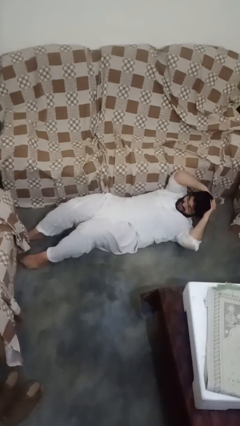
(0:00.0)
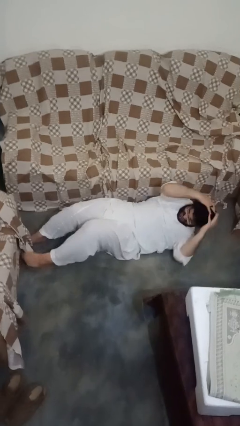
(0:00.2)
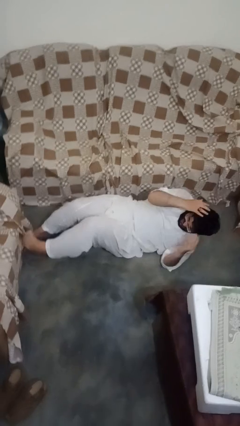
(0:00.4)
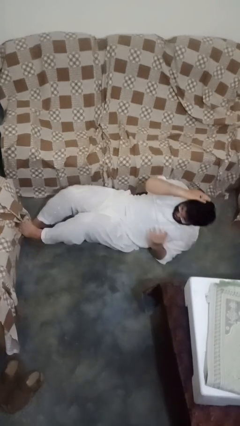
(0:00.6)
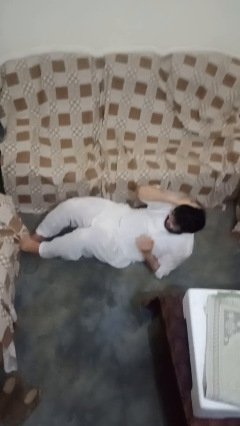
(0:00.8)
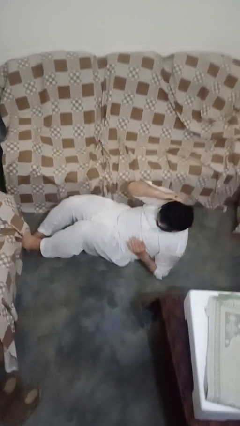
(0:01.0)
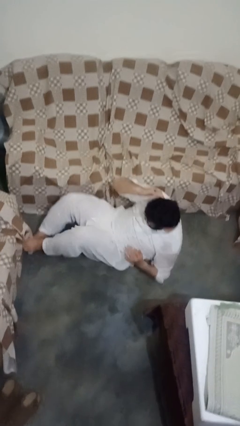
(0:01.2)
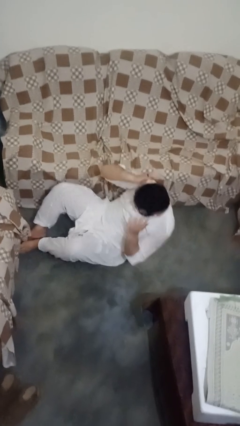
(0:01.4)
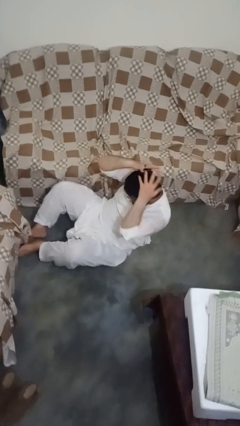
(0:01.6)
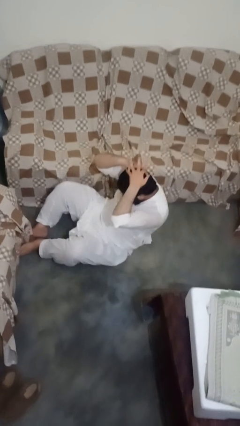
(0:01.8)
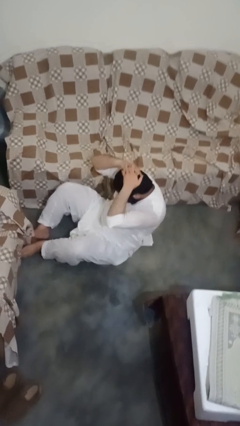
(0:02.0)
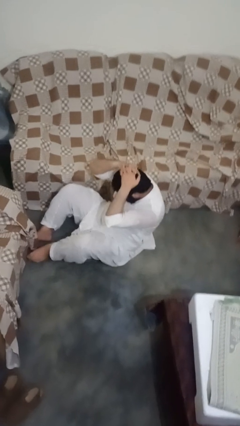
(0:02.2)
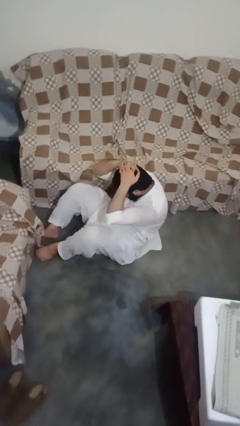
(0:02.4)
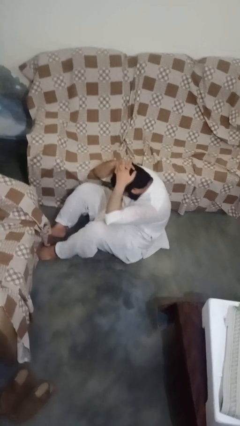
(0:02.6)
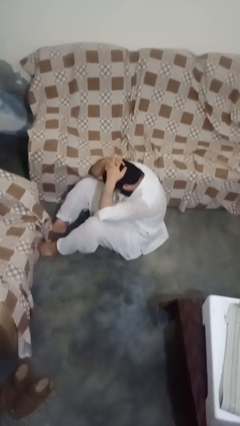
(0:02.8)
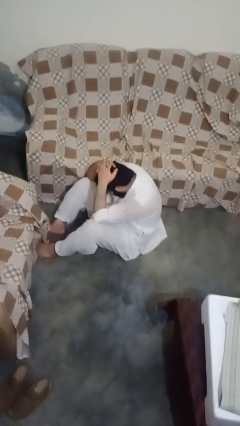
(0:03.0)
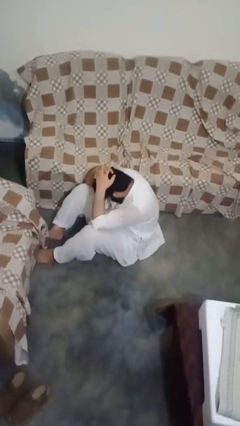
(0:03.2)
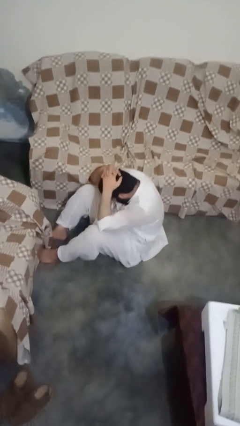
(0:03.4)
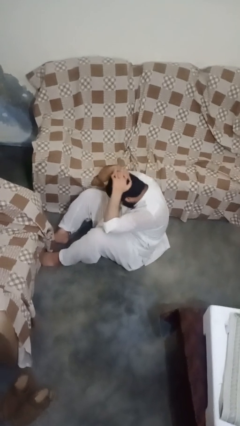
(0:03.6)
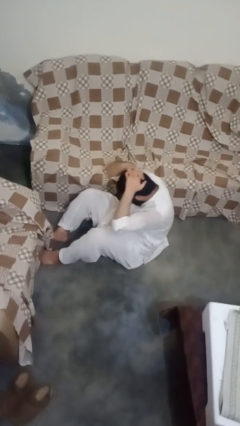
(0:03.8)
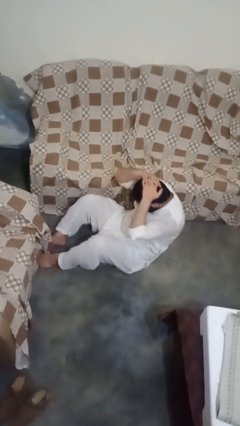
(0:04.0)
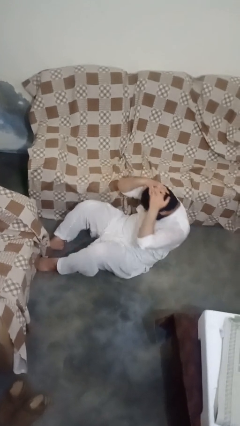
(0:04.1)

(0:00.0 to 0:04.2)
person exercises with situp

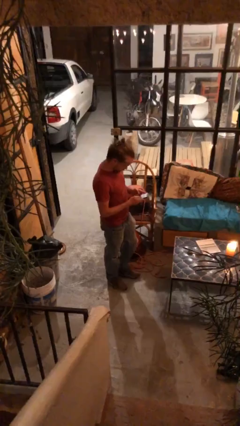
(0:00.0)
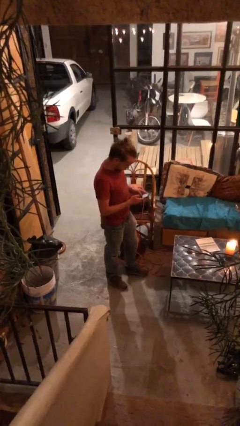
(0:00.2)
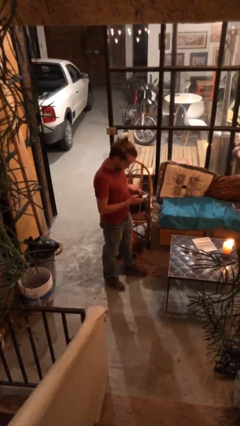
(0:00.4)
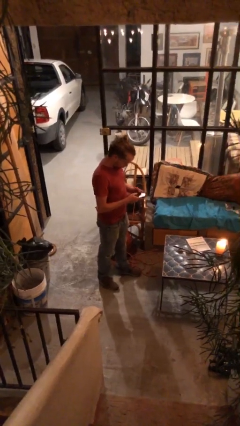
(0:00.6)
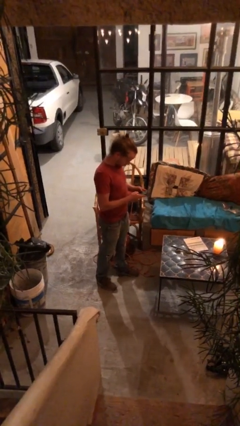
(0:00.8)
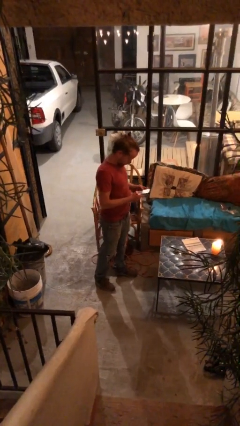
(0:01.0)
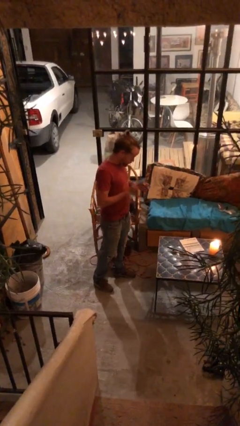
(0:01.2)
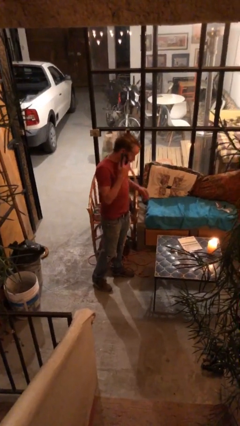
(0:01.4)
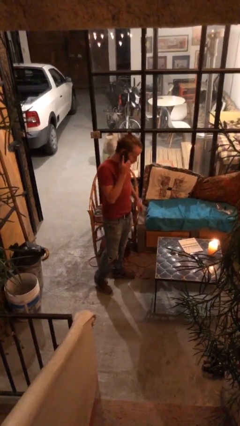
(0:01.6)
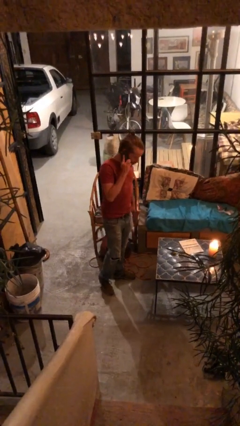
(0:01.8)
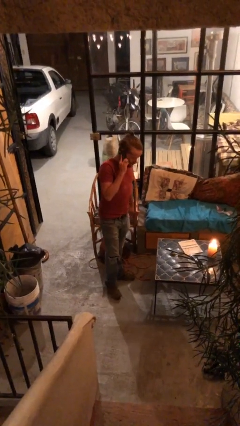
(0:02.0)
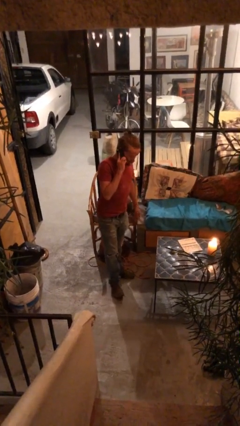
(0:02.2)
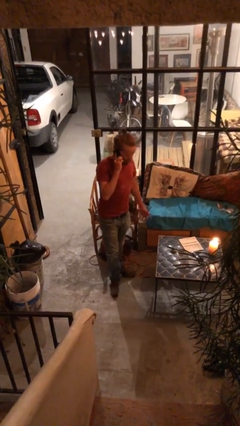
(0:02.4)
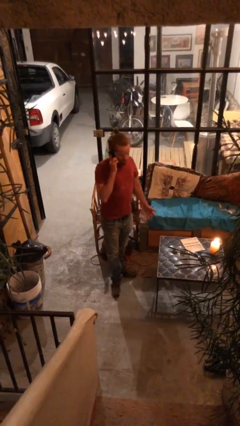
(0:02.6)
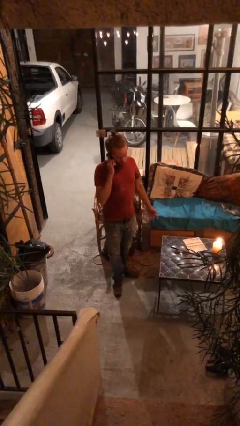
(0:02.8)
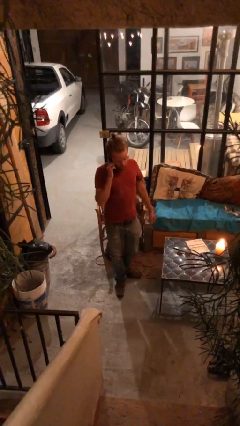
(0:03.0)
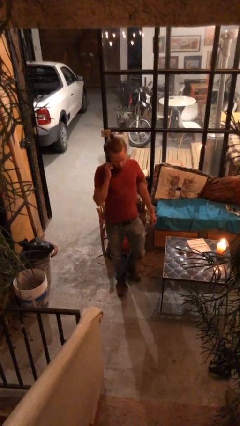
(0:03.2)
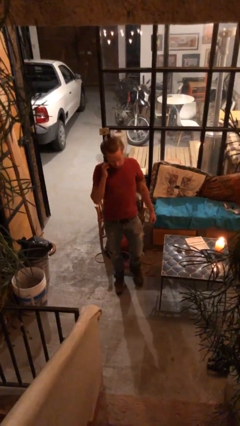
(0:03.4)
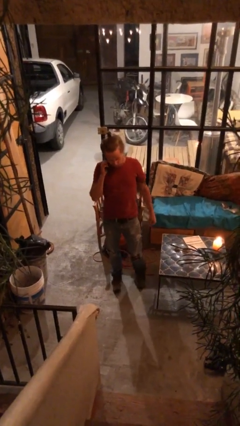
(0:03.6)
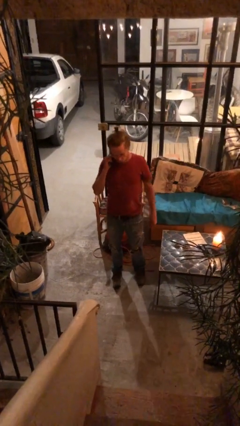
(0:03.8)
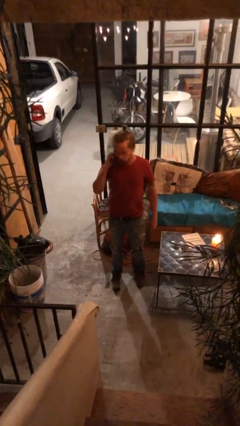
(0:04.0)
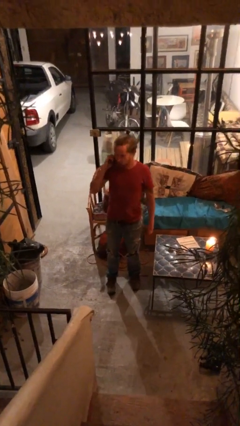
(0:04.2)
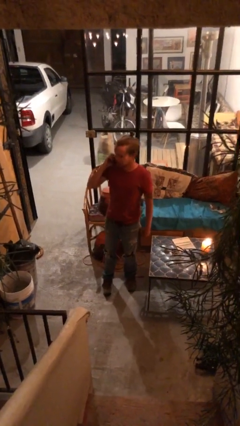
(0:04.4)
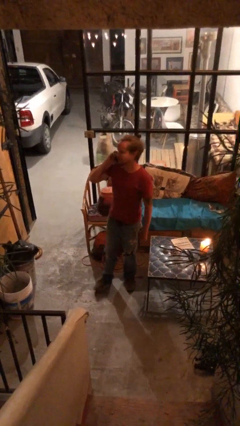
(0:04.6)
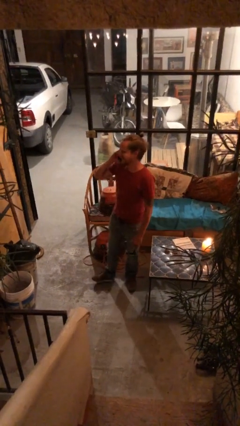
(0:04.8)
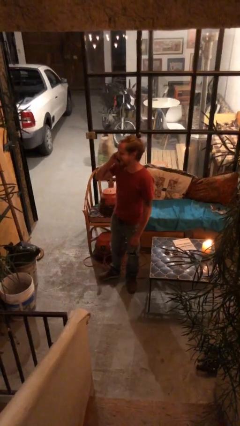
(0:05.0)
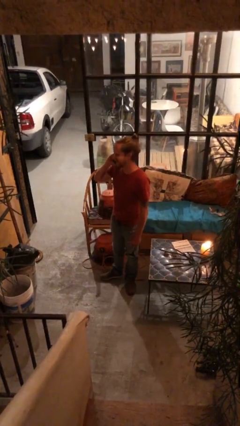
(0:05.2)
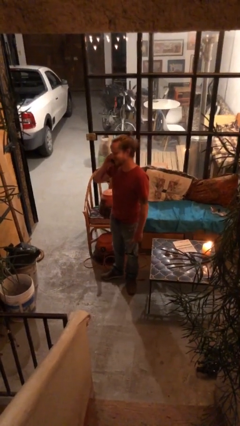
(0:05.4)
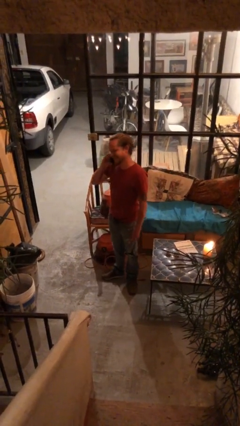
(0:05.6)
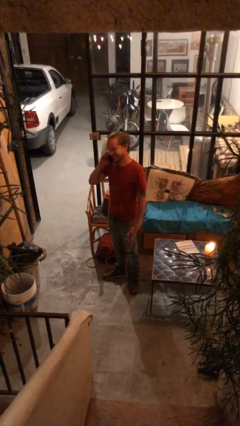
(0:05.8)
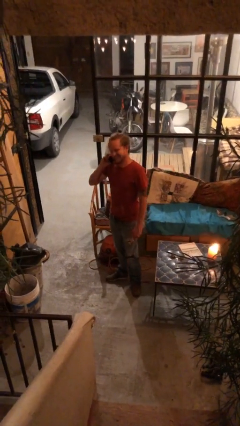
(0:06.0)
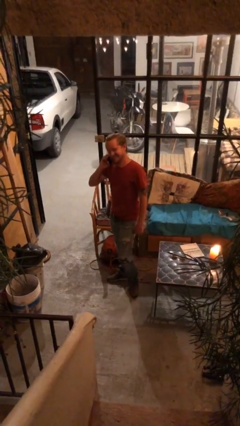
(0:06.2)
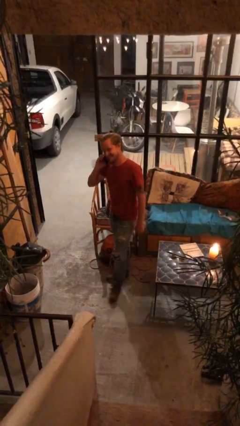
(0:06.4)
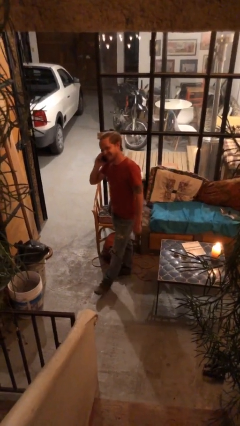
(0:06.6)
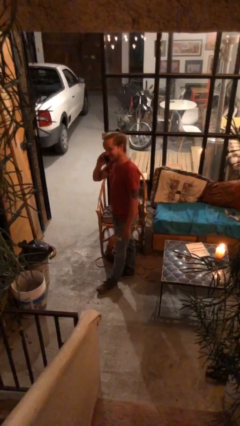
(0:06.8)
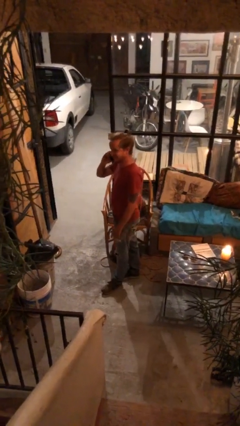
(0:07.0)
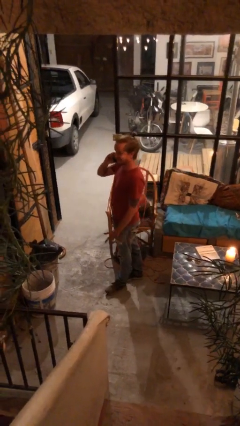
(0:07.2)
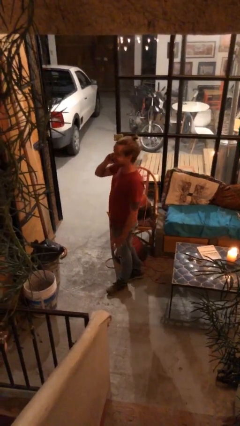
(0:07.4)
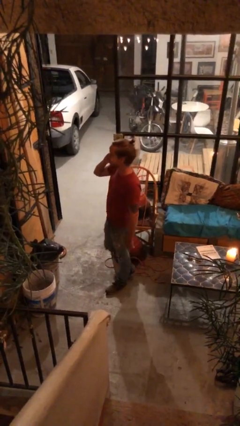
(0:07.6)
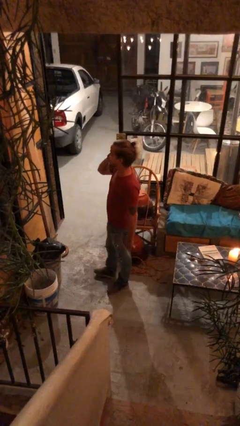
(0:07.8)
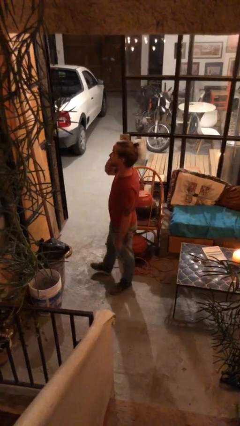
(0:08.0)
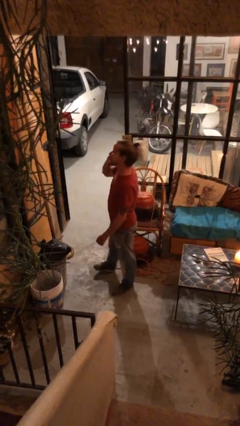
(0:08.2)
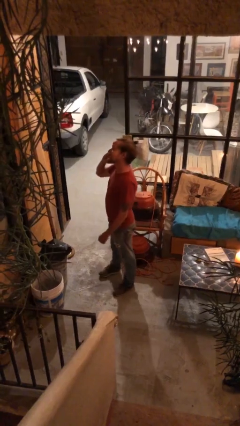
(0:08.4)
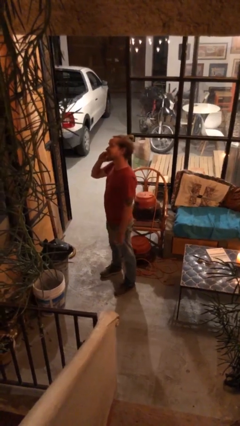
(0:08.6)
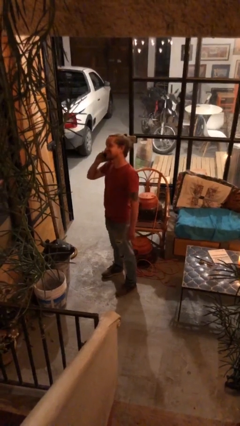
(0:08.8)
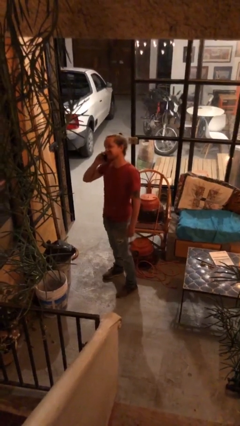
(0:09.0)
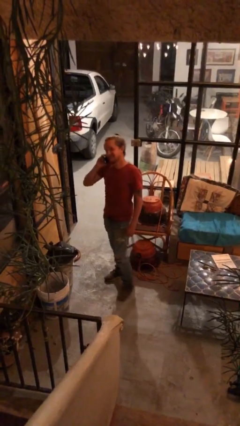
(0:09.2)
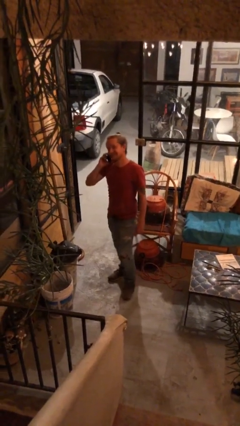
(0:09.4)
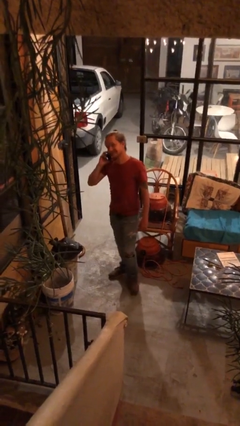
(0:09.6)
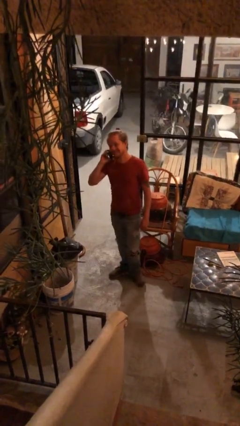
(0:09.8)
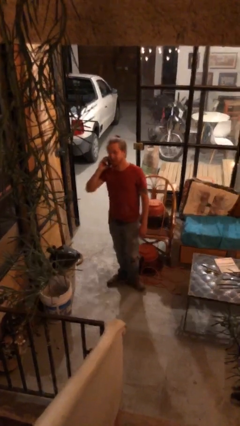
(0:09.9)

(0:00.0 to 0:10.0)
person talks on phone

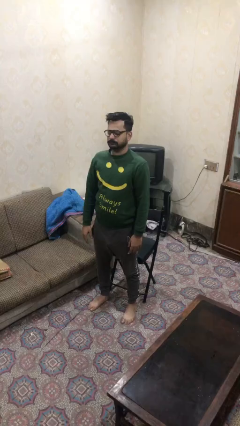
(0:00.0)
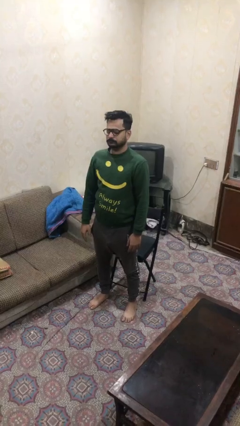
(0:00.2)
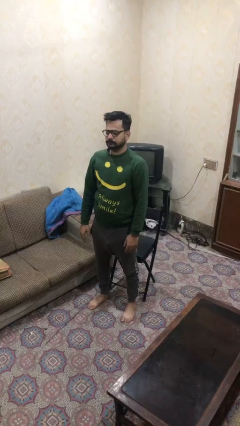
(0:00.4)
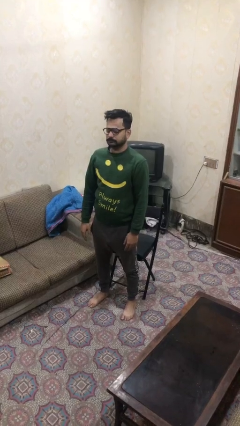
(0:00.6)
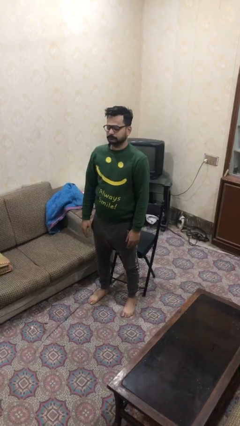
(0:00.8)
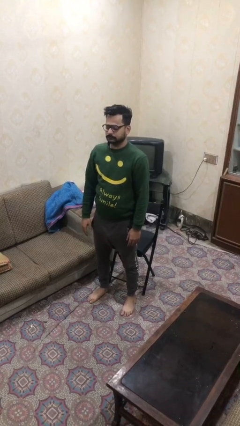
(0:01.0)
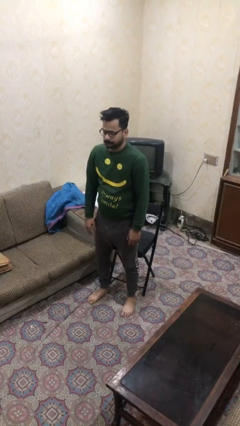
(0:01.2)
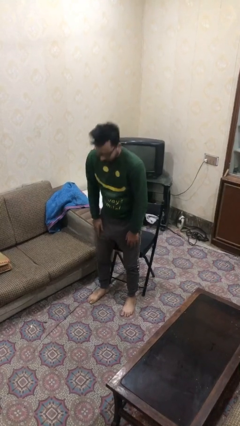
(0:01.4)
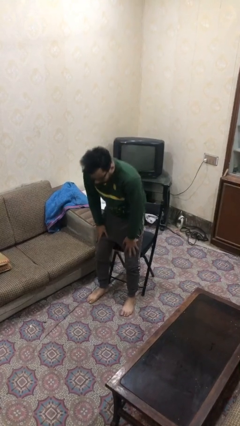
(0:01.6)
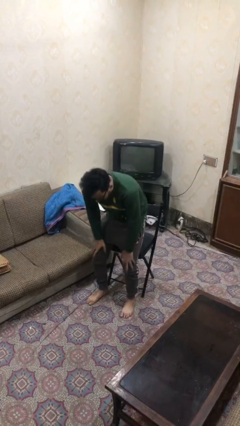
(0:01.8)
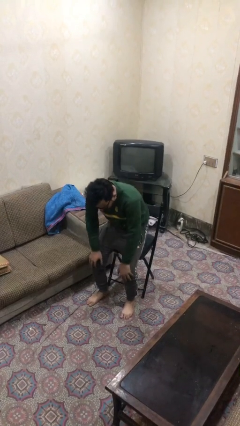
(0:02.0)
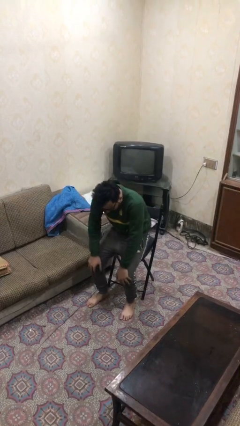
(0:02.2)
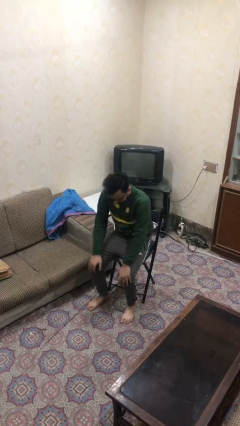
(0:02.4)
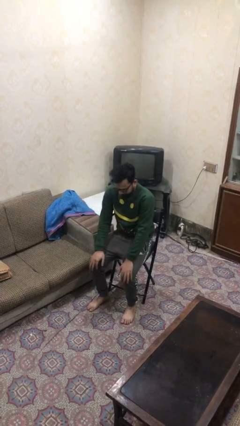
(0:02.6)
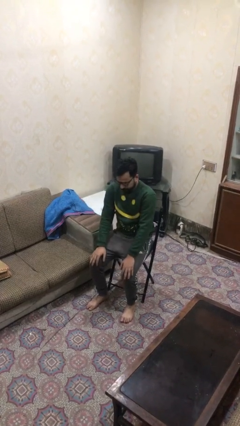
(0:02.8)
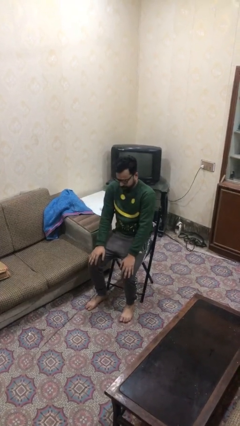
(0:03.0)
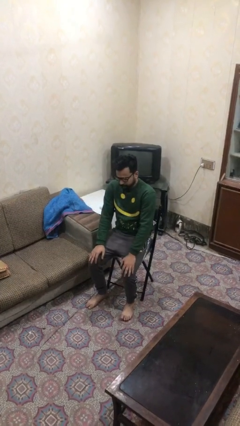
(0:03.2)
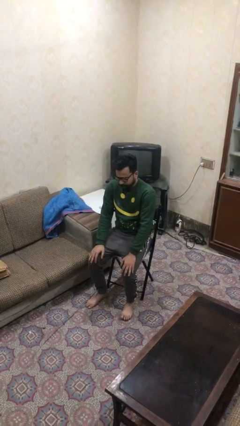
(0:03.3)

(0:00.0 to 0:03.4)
person sits down
